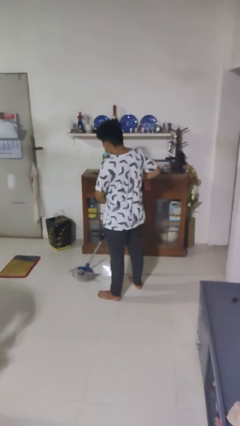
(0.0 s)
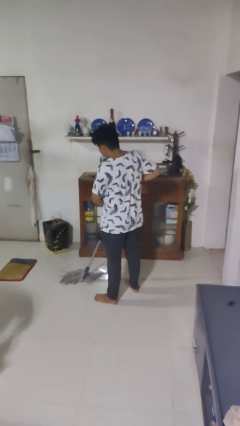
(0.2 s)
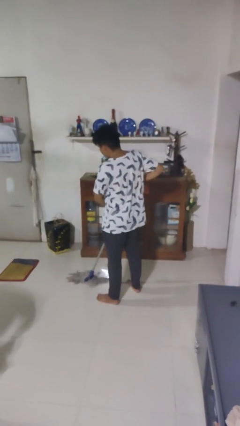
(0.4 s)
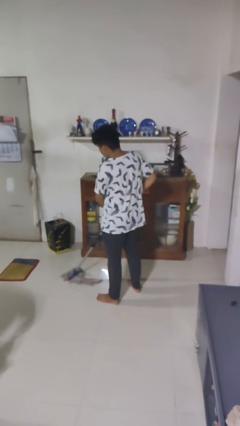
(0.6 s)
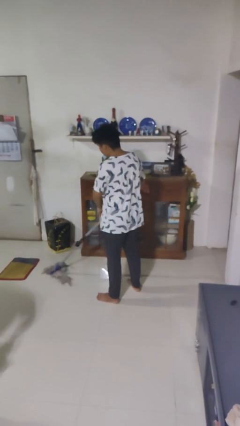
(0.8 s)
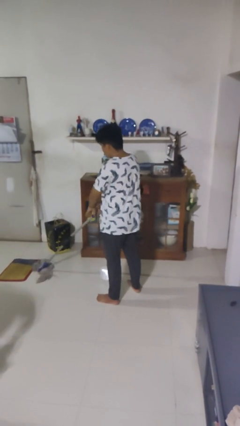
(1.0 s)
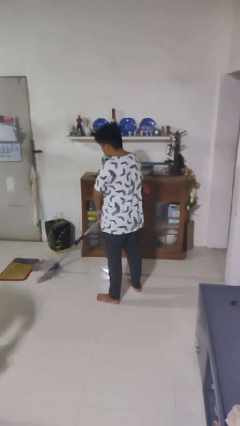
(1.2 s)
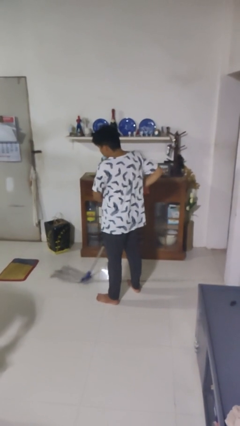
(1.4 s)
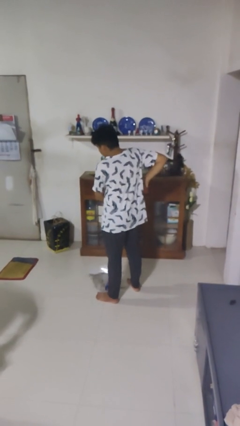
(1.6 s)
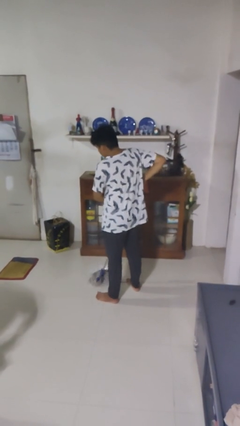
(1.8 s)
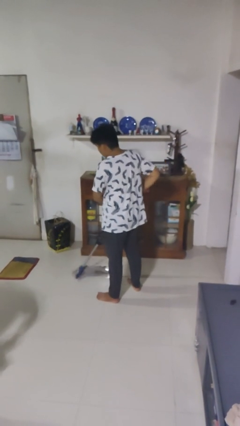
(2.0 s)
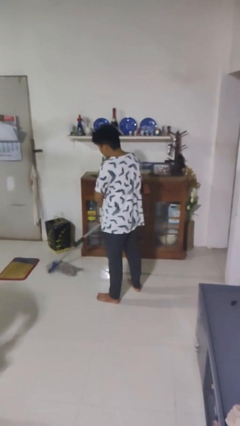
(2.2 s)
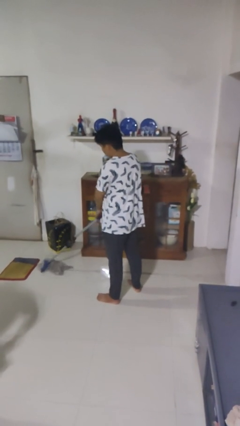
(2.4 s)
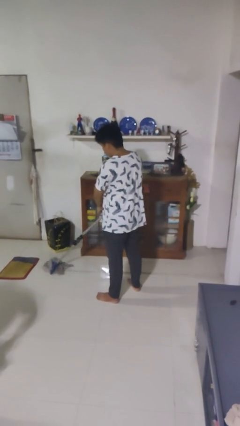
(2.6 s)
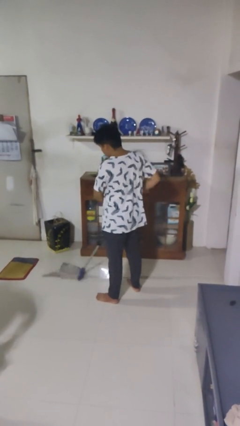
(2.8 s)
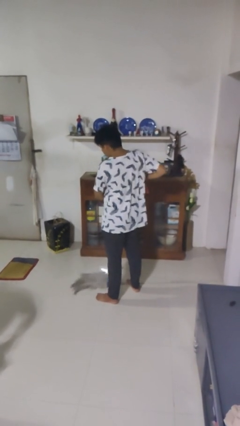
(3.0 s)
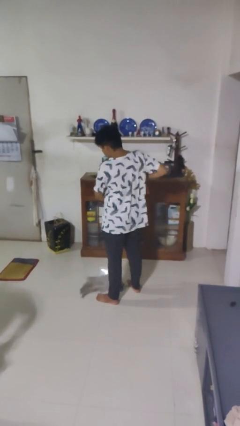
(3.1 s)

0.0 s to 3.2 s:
person mops

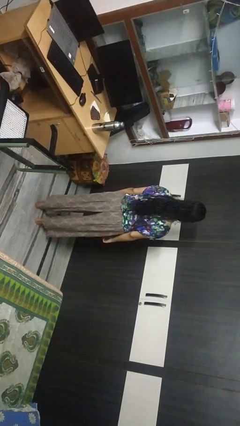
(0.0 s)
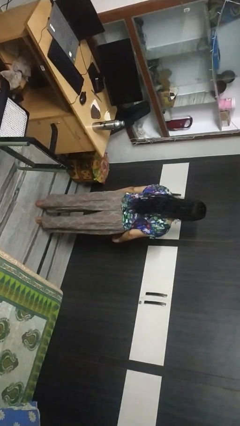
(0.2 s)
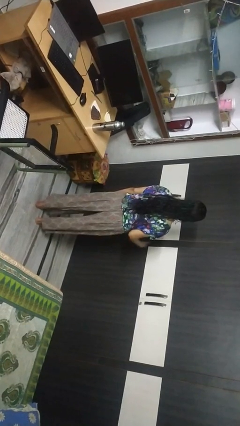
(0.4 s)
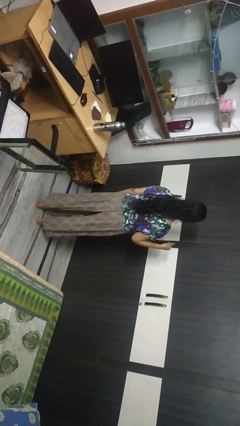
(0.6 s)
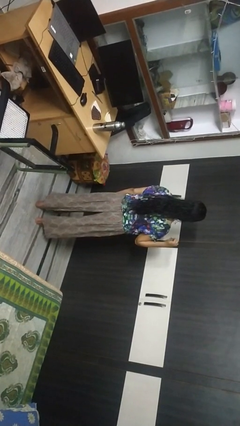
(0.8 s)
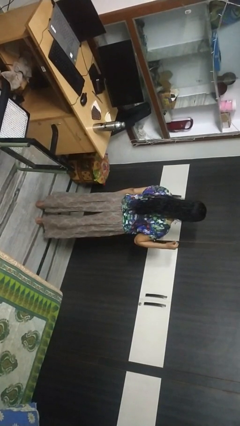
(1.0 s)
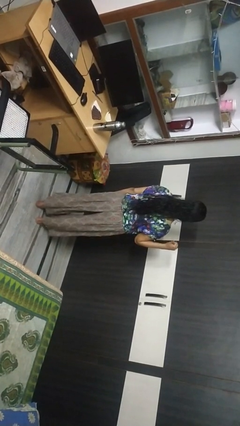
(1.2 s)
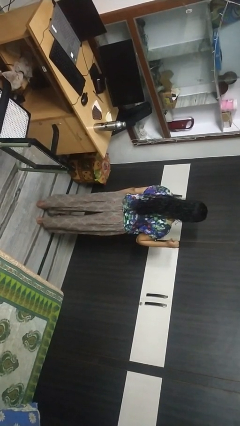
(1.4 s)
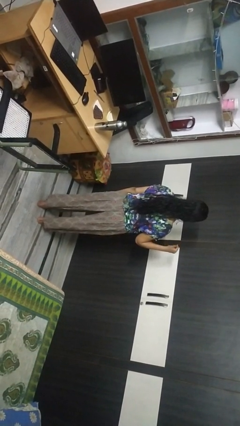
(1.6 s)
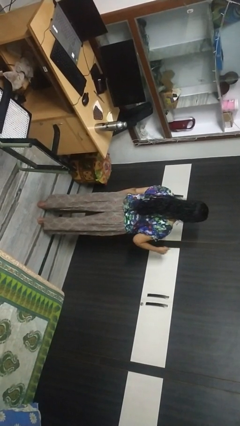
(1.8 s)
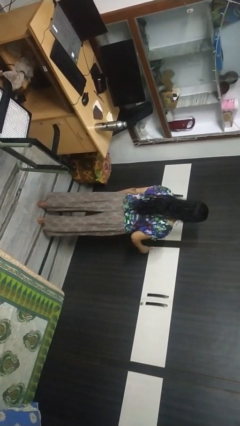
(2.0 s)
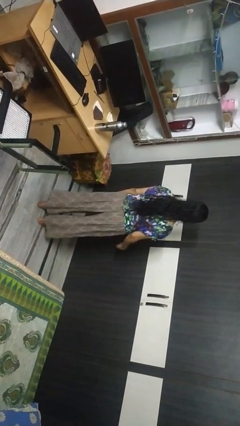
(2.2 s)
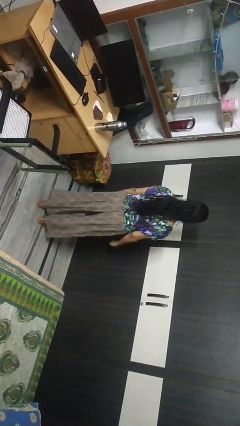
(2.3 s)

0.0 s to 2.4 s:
person gestures behind me

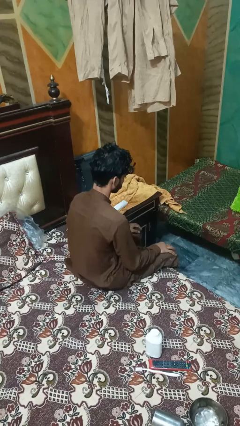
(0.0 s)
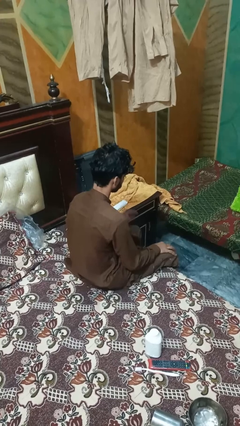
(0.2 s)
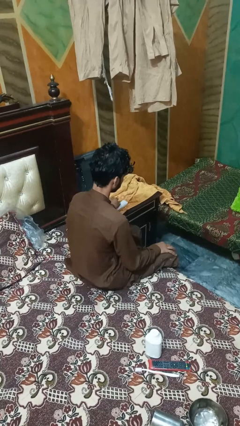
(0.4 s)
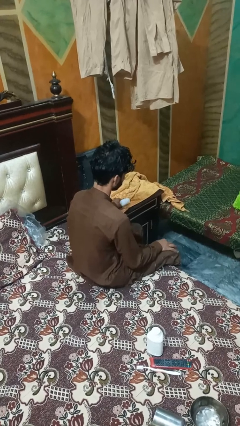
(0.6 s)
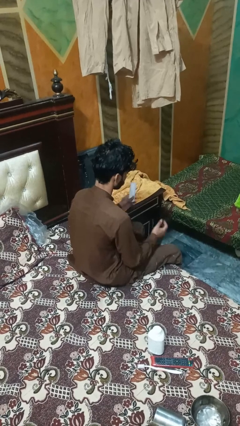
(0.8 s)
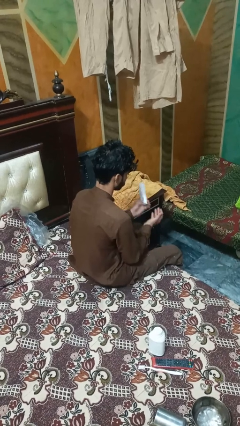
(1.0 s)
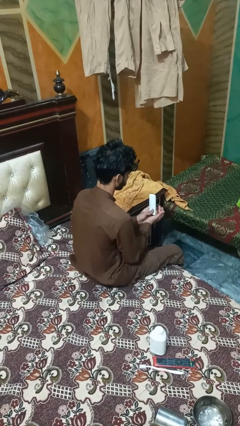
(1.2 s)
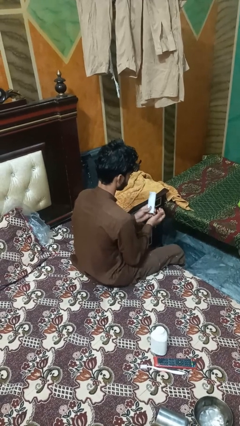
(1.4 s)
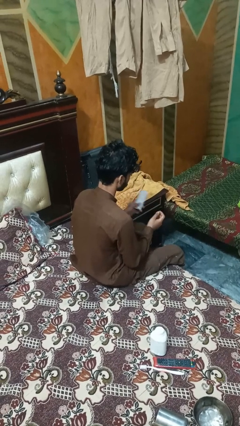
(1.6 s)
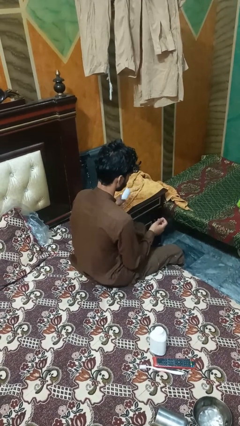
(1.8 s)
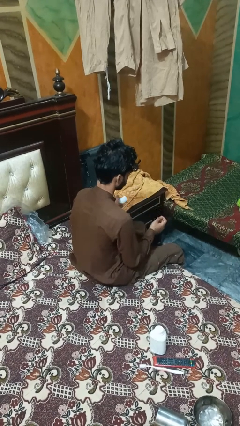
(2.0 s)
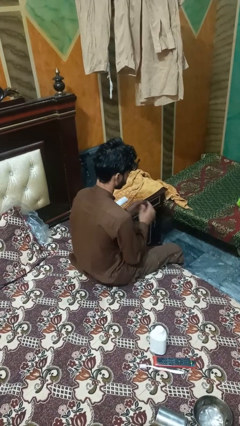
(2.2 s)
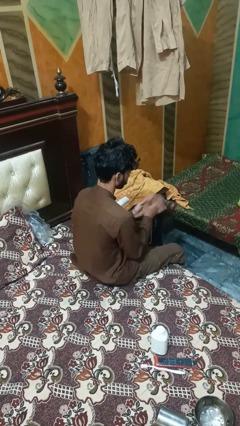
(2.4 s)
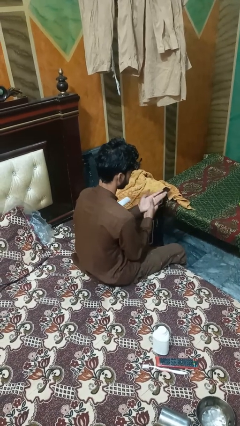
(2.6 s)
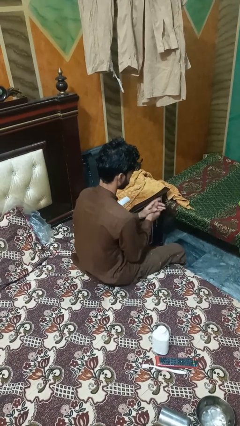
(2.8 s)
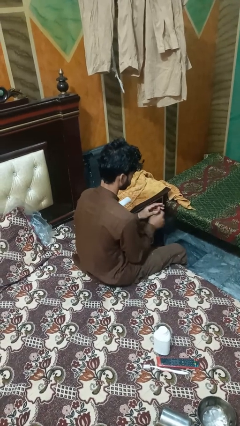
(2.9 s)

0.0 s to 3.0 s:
person applies facial moisturizer

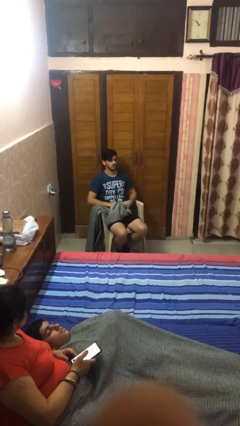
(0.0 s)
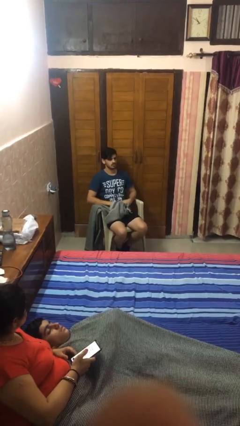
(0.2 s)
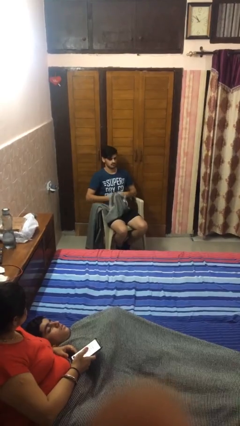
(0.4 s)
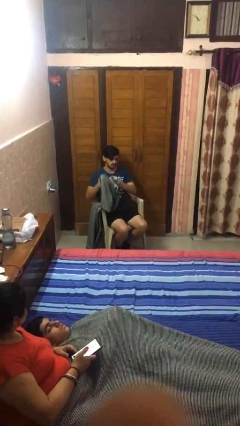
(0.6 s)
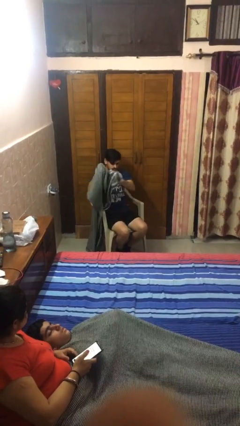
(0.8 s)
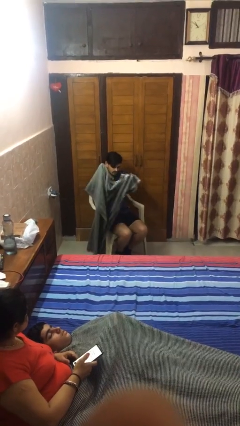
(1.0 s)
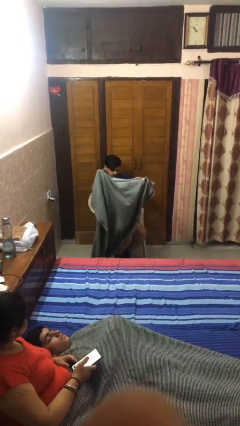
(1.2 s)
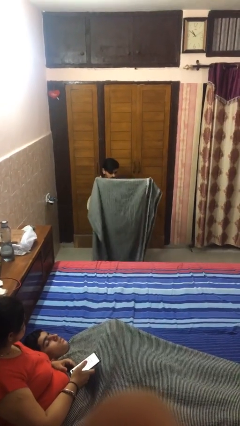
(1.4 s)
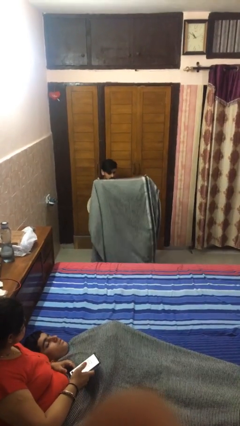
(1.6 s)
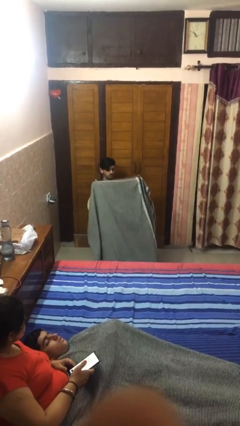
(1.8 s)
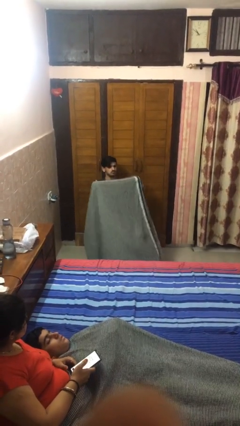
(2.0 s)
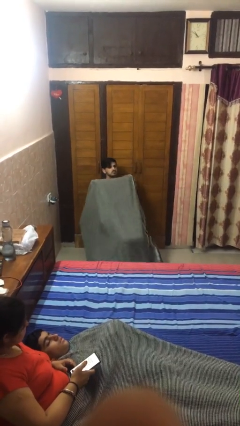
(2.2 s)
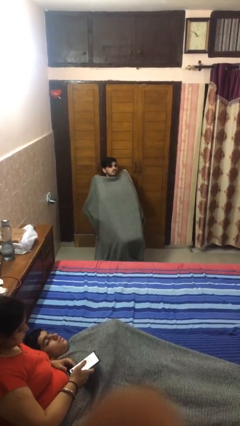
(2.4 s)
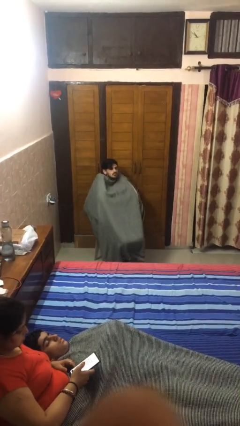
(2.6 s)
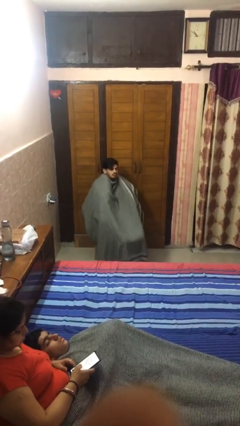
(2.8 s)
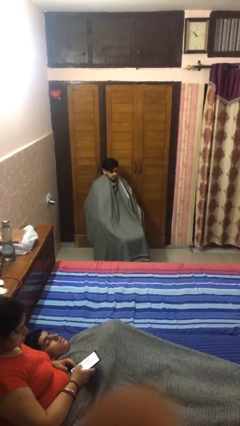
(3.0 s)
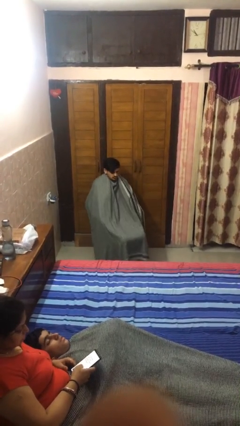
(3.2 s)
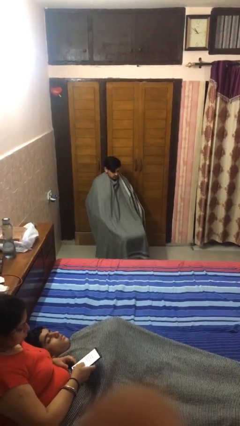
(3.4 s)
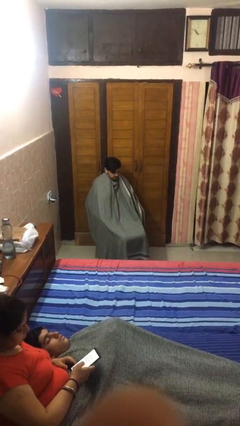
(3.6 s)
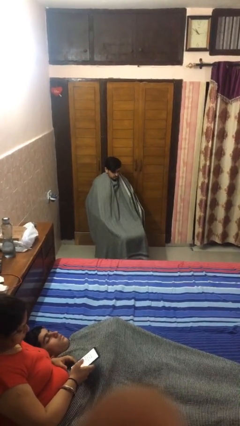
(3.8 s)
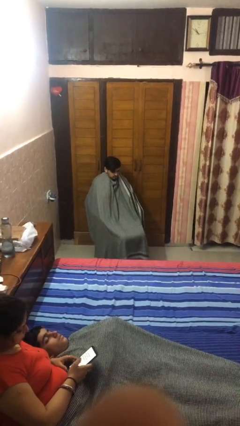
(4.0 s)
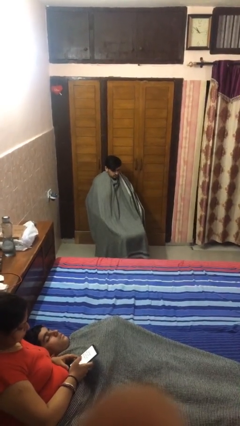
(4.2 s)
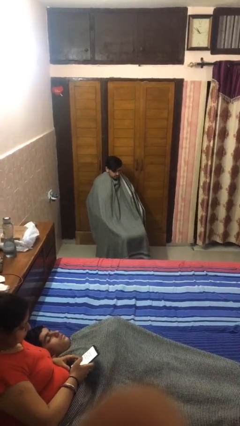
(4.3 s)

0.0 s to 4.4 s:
person covers with blanket

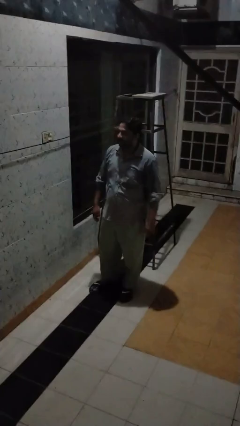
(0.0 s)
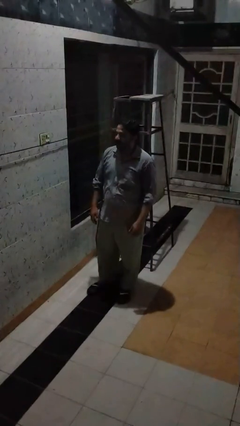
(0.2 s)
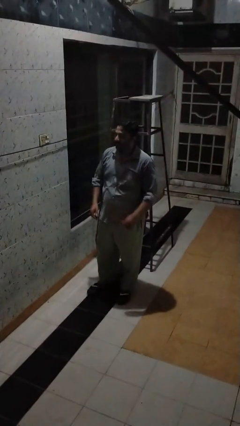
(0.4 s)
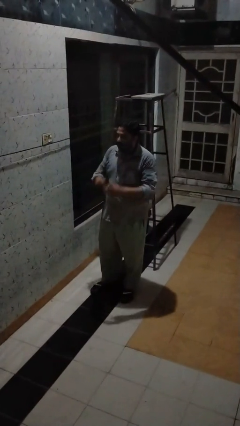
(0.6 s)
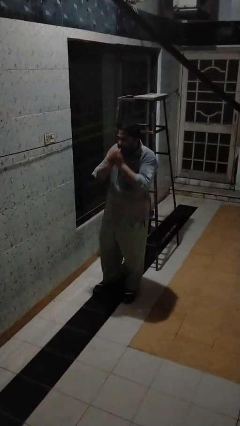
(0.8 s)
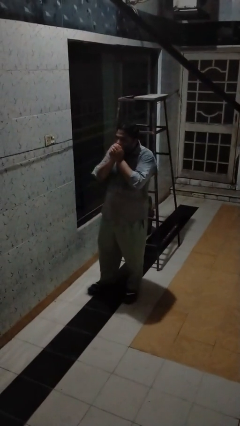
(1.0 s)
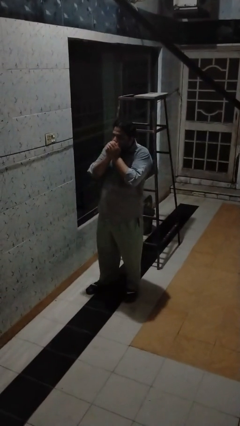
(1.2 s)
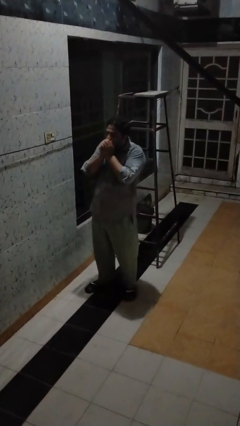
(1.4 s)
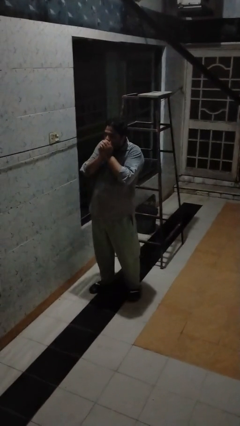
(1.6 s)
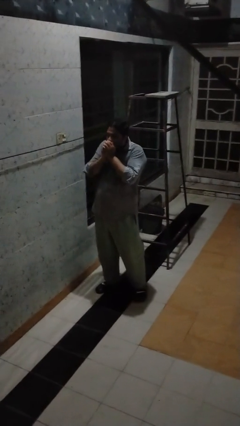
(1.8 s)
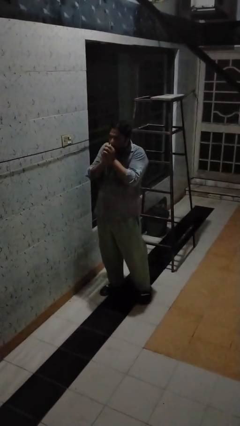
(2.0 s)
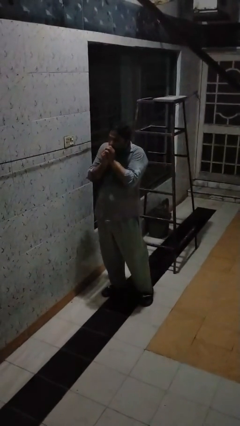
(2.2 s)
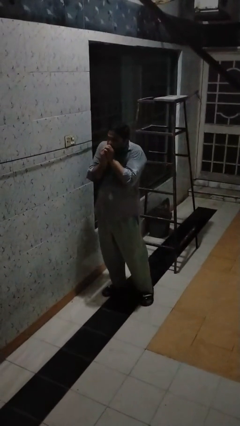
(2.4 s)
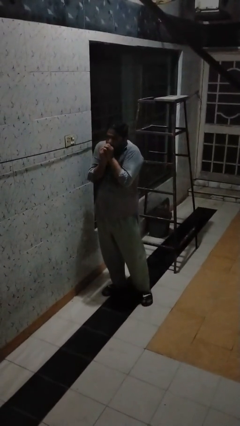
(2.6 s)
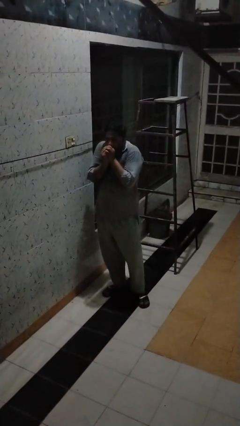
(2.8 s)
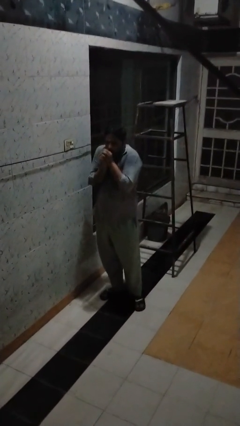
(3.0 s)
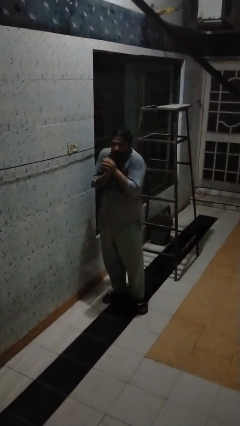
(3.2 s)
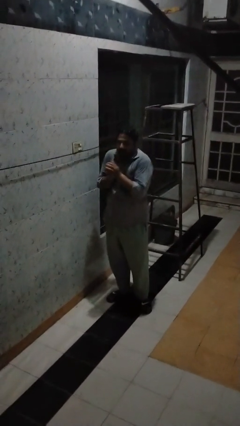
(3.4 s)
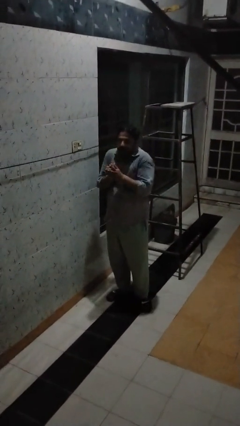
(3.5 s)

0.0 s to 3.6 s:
person blows into hands

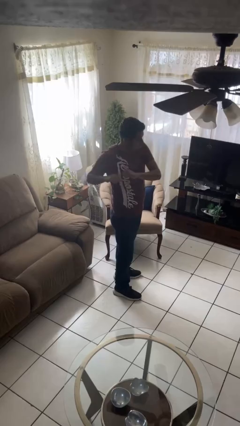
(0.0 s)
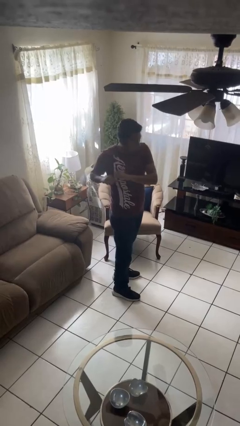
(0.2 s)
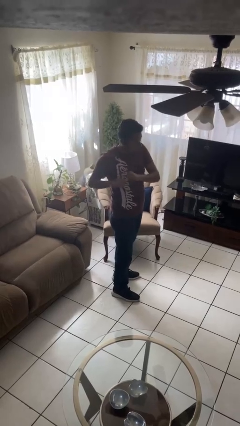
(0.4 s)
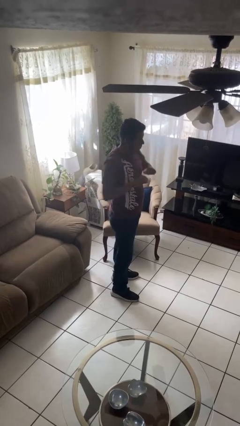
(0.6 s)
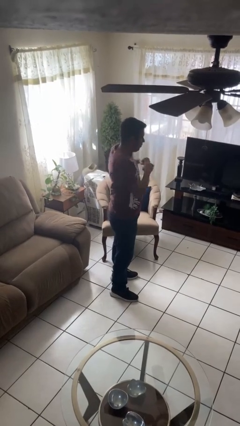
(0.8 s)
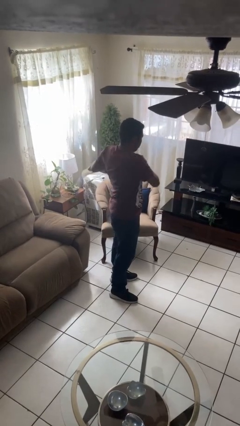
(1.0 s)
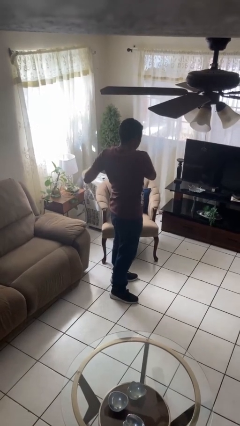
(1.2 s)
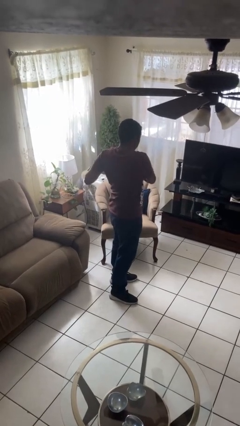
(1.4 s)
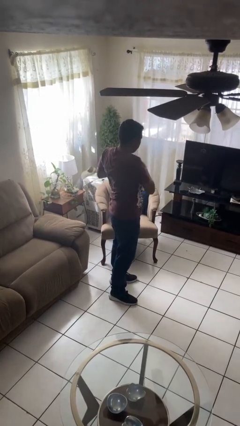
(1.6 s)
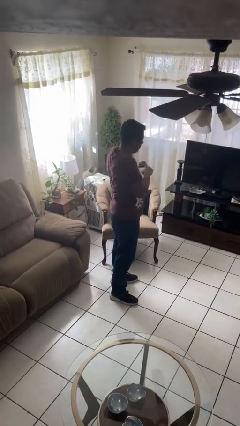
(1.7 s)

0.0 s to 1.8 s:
person stretches arms to side
